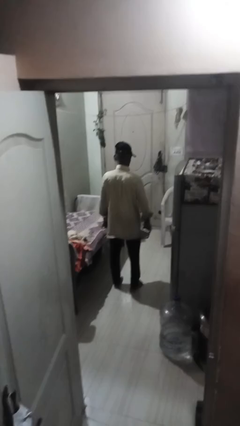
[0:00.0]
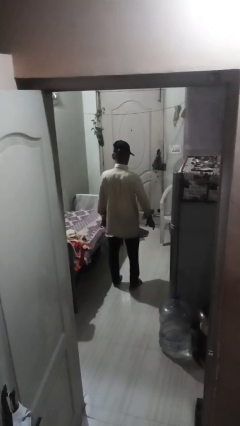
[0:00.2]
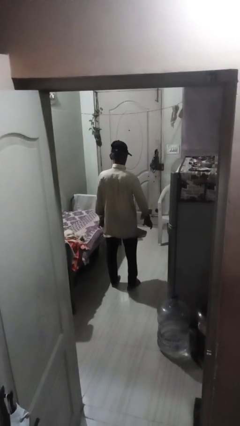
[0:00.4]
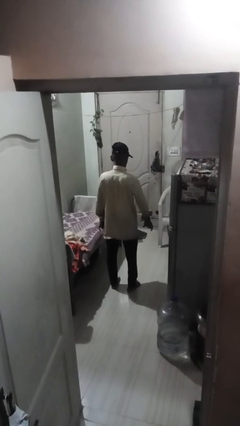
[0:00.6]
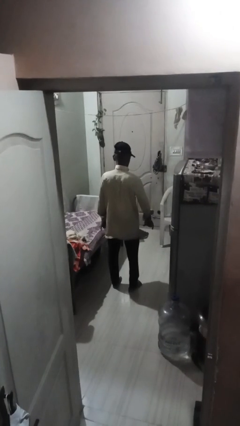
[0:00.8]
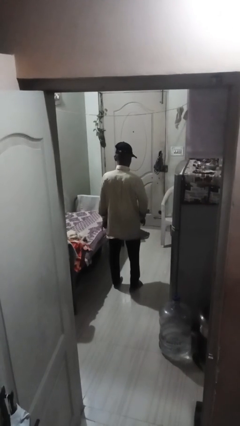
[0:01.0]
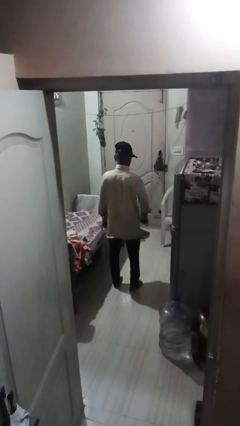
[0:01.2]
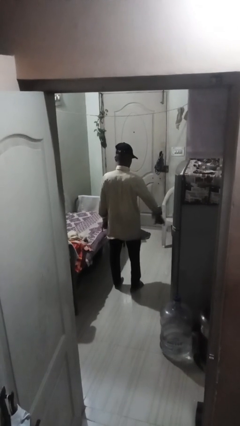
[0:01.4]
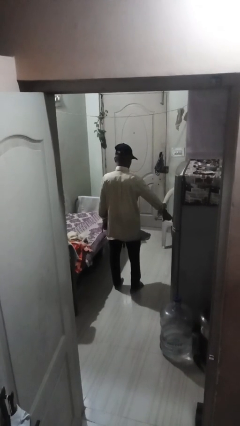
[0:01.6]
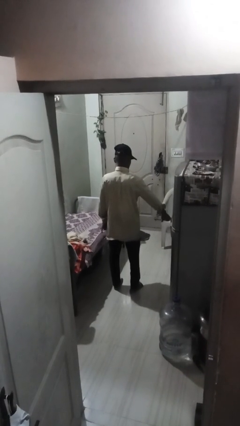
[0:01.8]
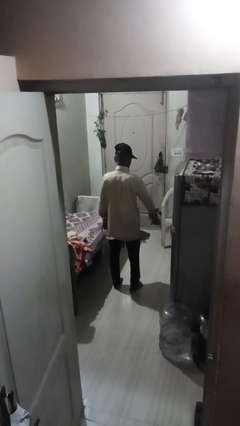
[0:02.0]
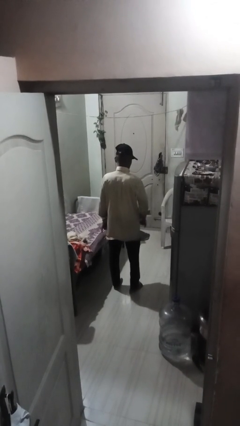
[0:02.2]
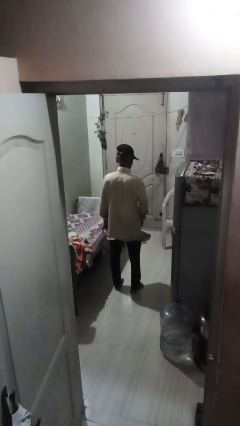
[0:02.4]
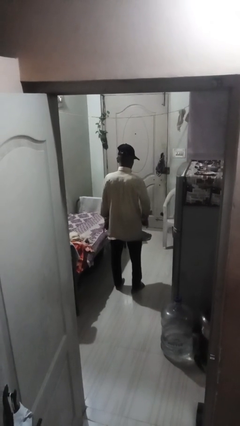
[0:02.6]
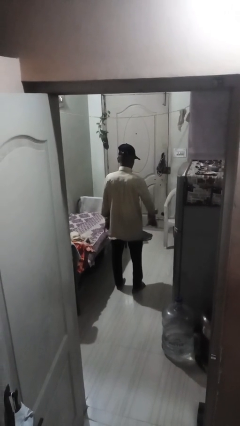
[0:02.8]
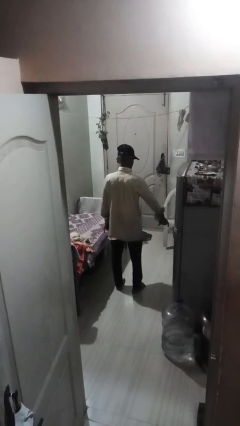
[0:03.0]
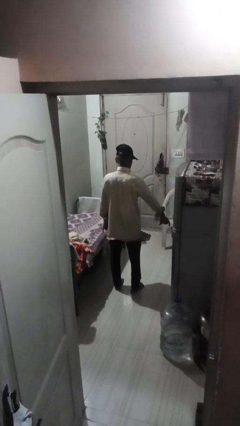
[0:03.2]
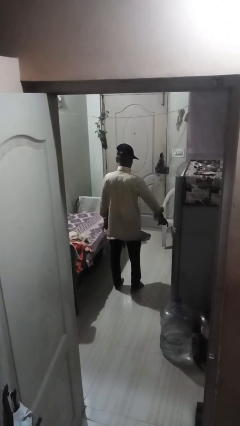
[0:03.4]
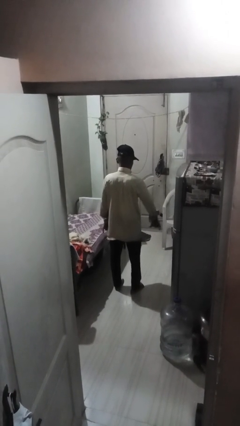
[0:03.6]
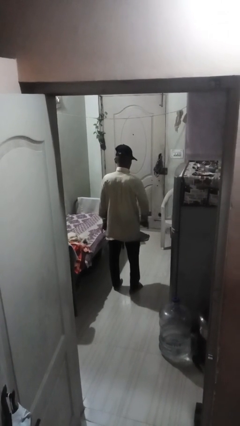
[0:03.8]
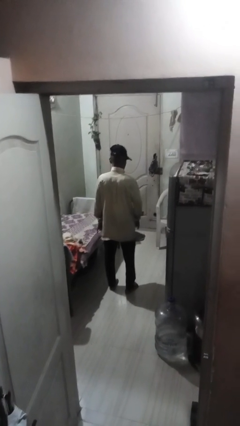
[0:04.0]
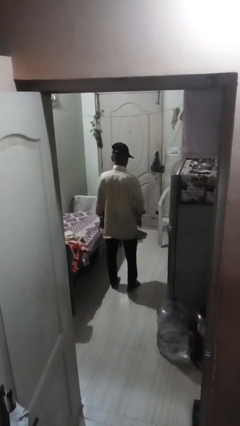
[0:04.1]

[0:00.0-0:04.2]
person gestures hang loose

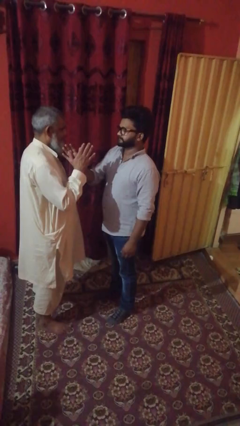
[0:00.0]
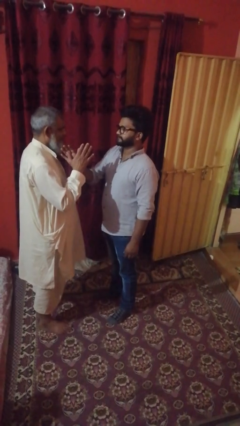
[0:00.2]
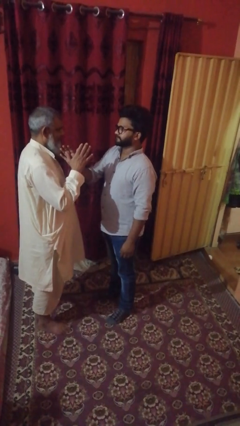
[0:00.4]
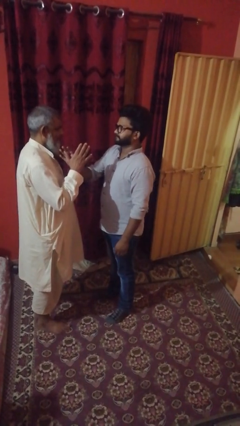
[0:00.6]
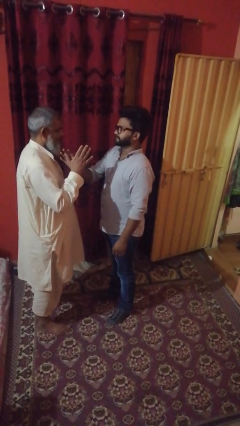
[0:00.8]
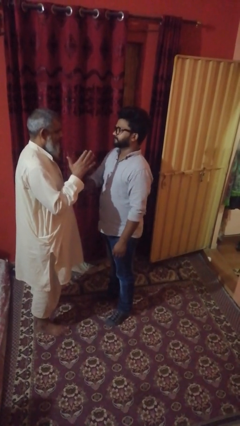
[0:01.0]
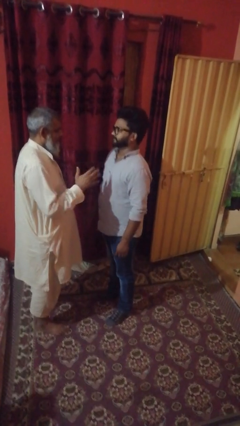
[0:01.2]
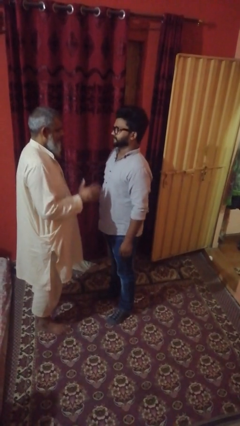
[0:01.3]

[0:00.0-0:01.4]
person highfives hand

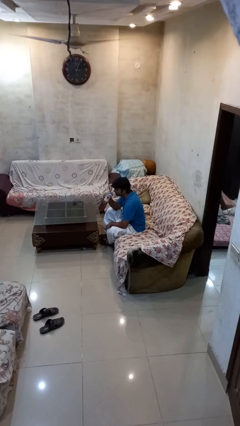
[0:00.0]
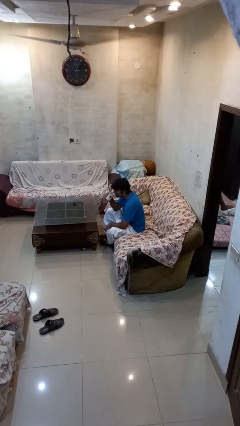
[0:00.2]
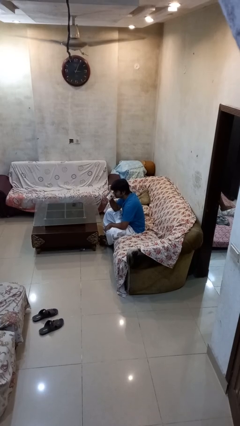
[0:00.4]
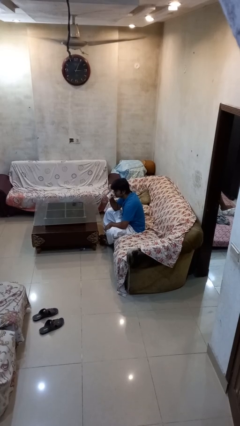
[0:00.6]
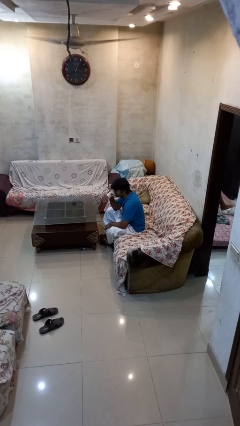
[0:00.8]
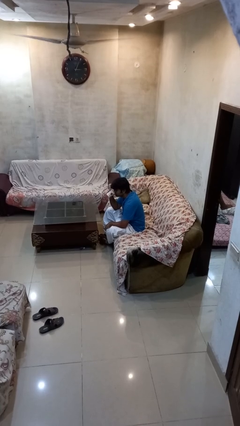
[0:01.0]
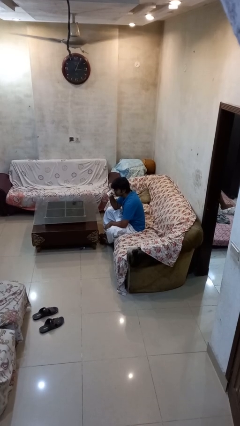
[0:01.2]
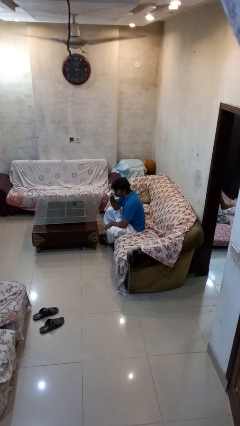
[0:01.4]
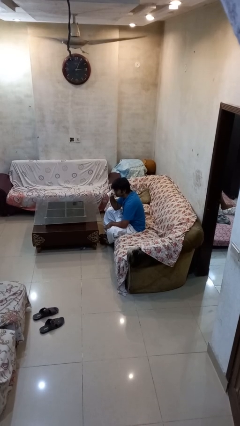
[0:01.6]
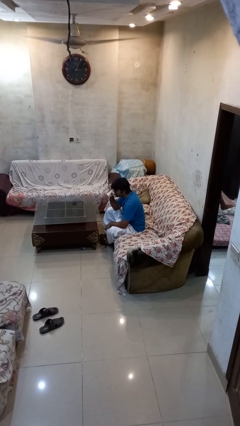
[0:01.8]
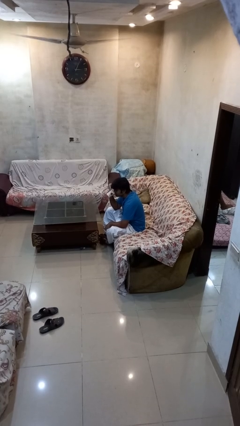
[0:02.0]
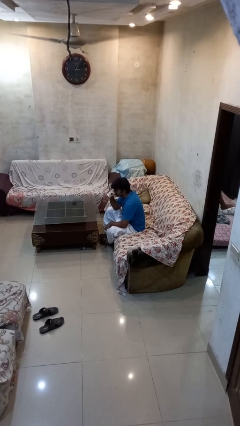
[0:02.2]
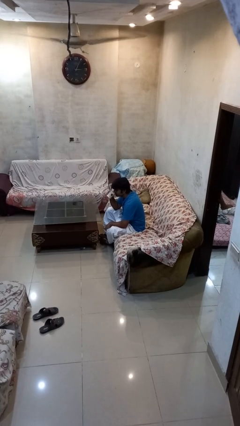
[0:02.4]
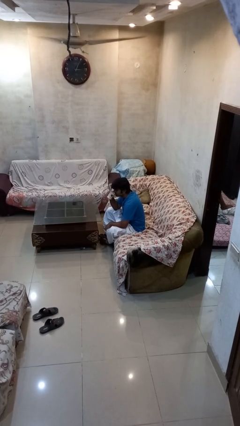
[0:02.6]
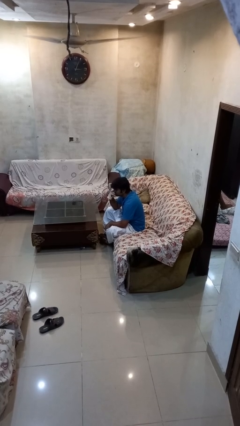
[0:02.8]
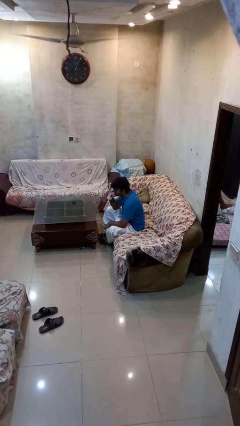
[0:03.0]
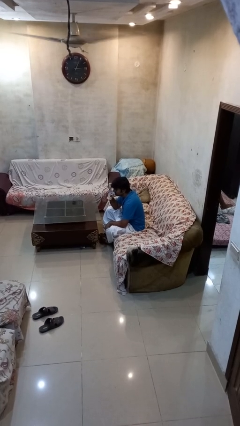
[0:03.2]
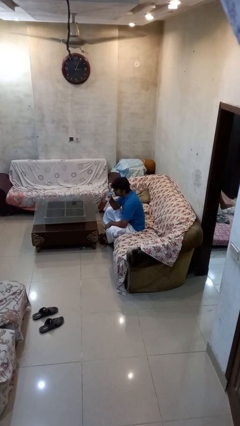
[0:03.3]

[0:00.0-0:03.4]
person drinks from mug

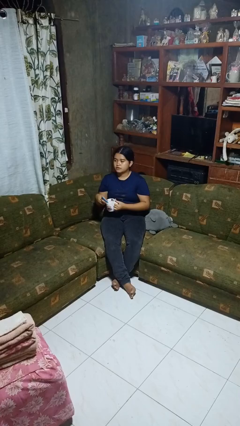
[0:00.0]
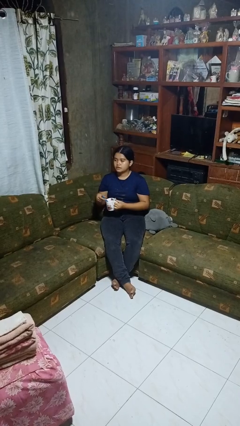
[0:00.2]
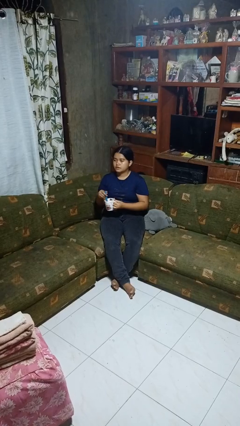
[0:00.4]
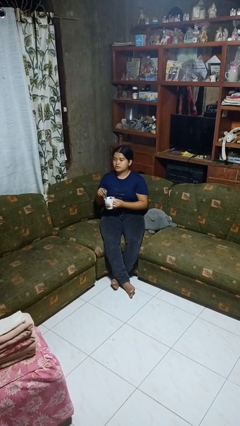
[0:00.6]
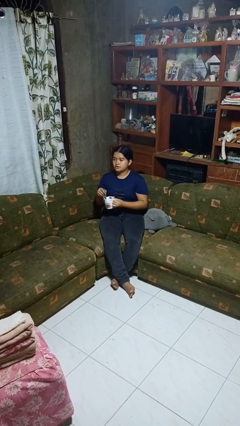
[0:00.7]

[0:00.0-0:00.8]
person stirs mug

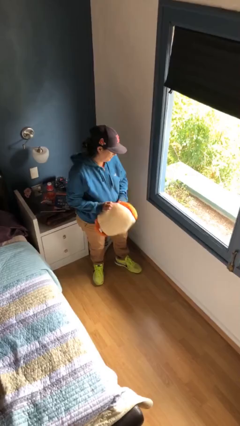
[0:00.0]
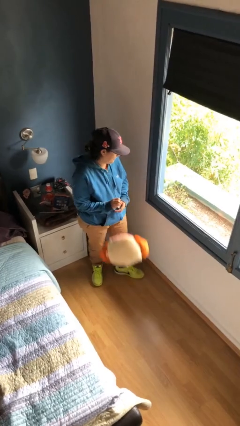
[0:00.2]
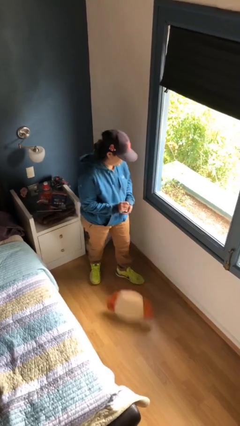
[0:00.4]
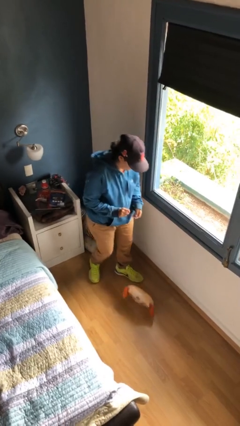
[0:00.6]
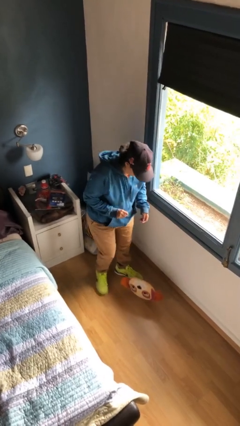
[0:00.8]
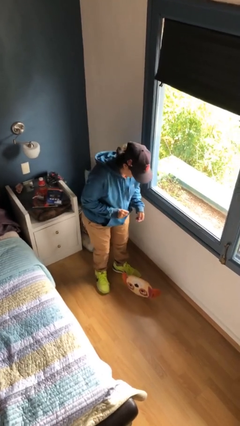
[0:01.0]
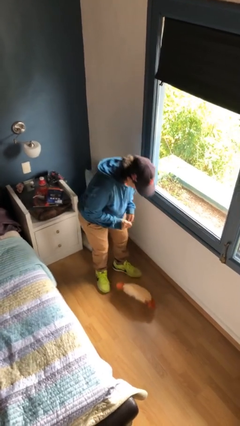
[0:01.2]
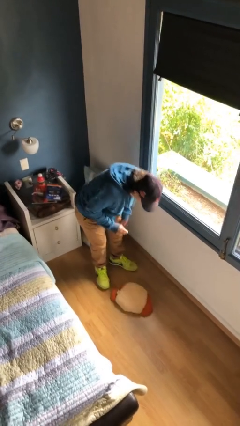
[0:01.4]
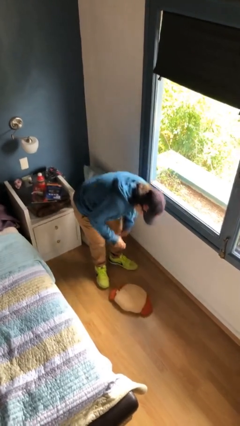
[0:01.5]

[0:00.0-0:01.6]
person drops object

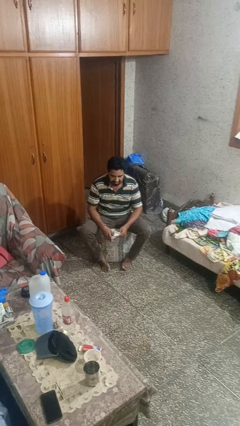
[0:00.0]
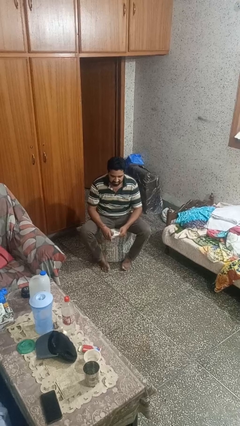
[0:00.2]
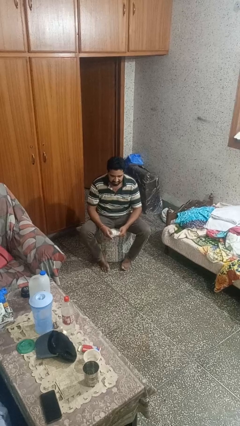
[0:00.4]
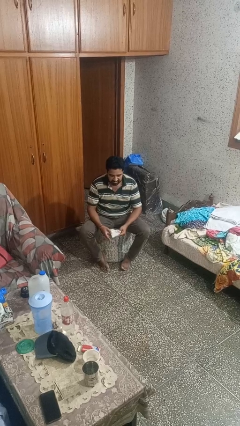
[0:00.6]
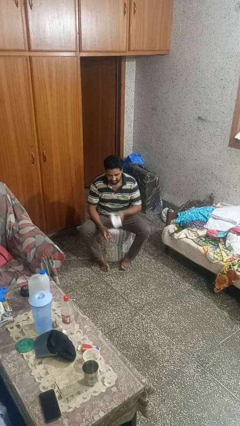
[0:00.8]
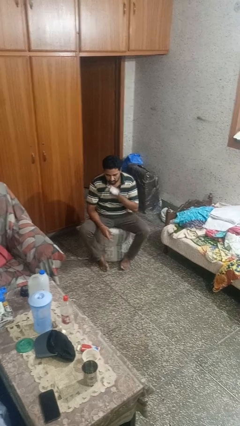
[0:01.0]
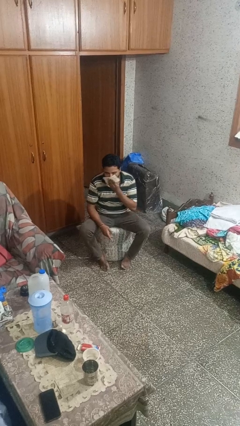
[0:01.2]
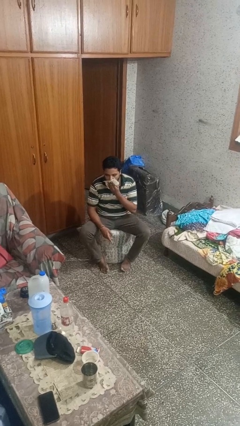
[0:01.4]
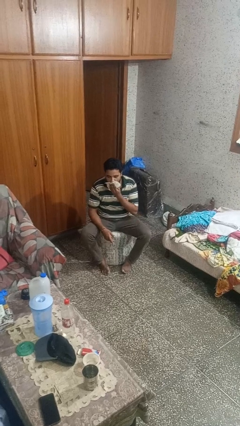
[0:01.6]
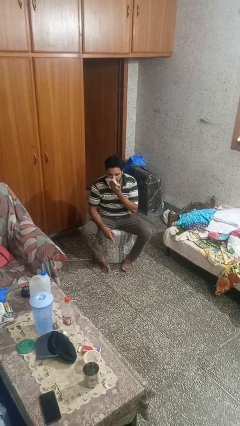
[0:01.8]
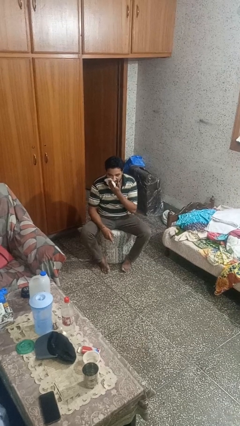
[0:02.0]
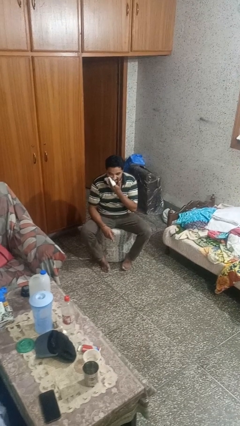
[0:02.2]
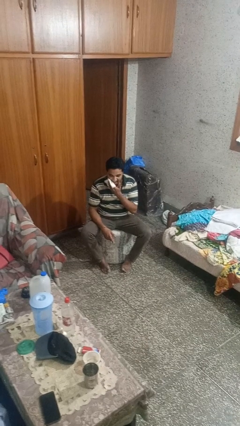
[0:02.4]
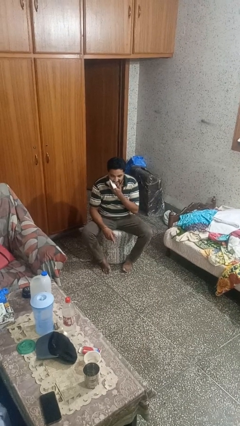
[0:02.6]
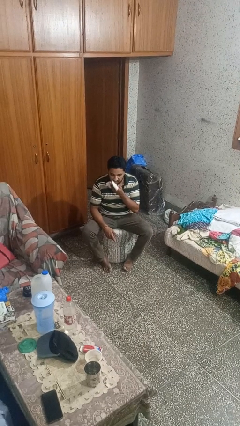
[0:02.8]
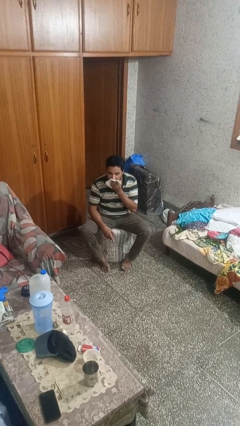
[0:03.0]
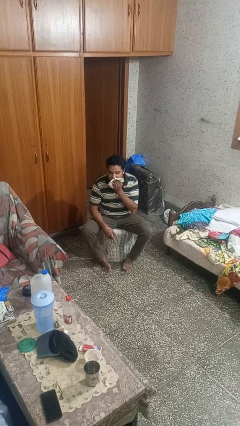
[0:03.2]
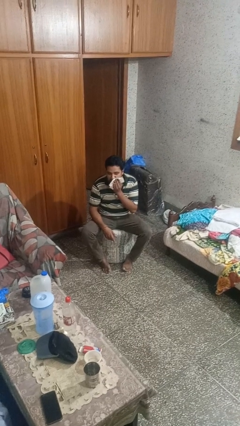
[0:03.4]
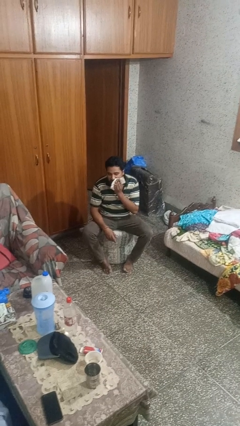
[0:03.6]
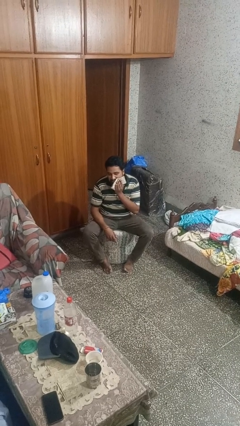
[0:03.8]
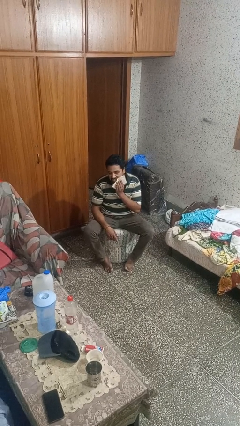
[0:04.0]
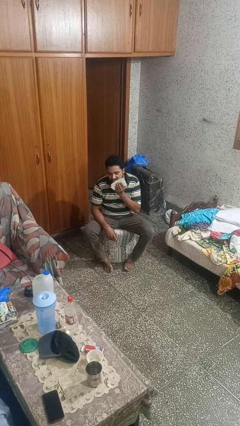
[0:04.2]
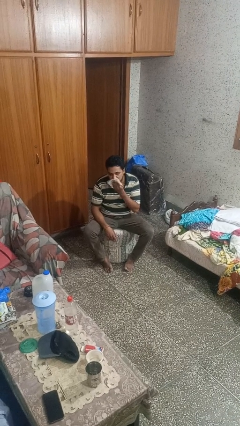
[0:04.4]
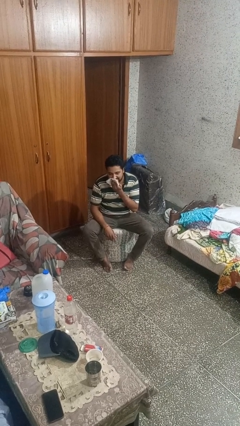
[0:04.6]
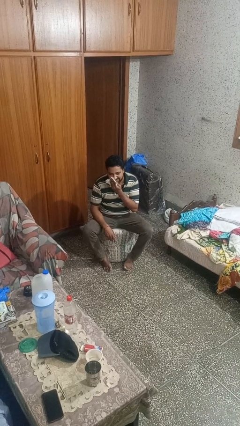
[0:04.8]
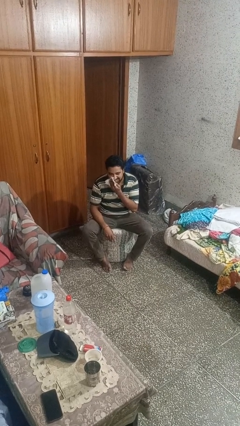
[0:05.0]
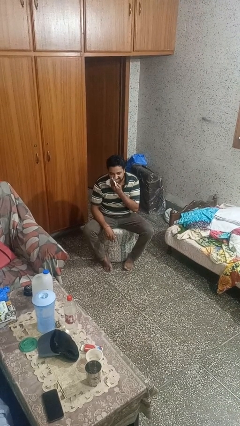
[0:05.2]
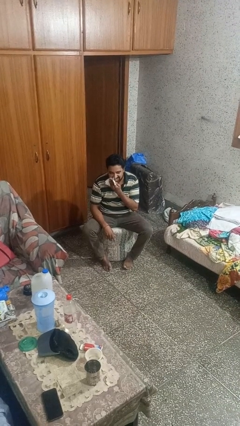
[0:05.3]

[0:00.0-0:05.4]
person wipes mouth with napkin

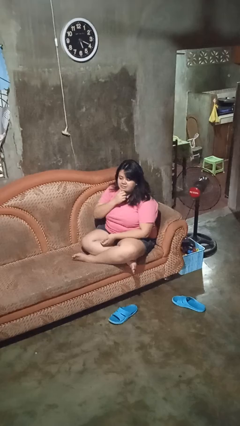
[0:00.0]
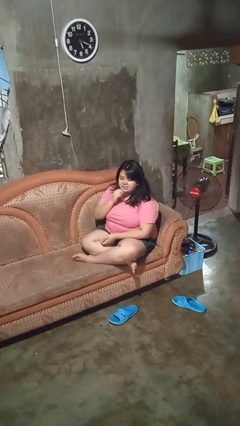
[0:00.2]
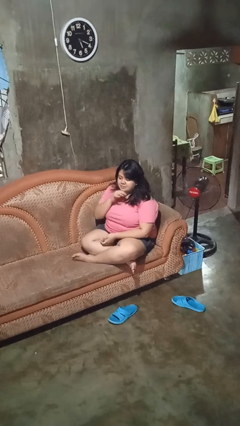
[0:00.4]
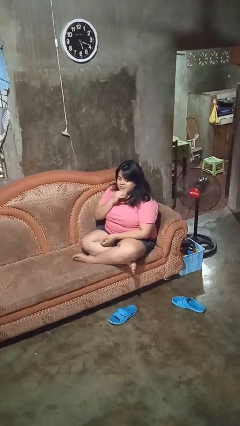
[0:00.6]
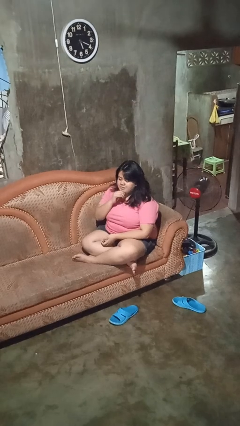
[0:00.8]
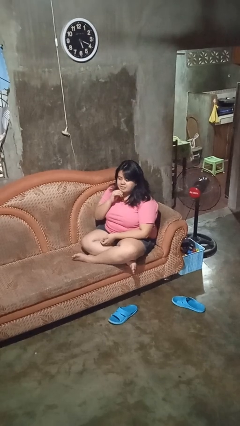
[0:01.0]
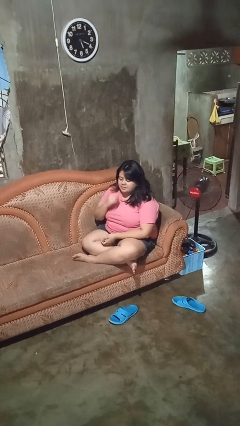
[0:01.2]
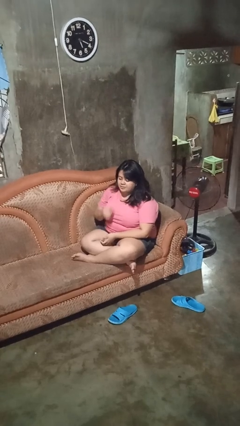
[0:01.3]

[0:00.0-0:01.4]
person strokes chin
